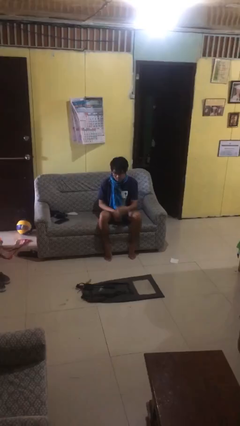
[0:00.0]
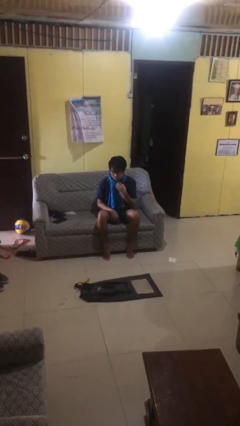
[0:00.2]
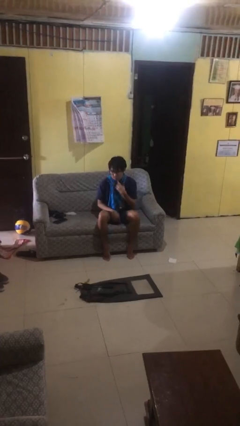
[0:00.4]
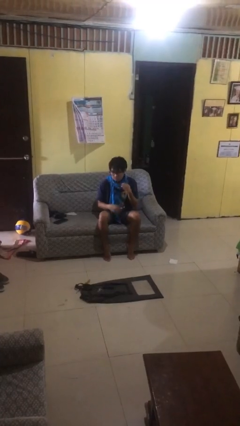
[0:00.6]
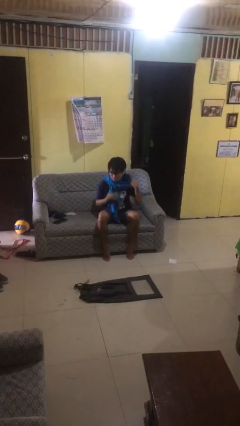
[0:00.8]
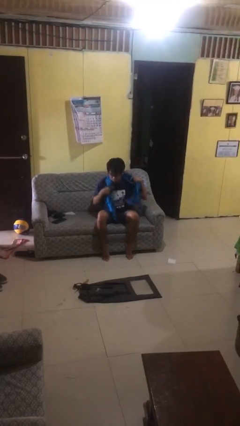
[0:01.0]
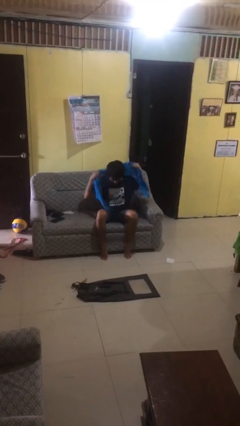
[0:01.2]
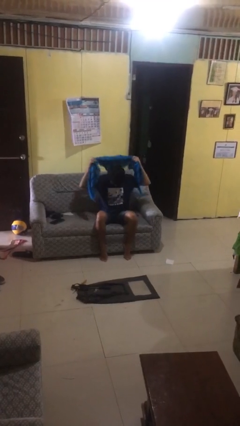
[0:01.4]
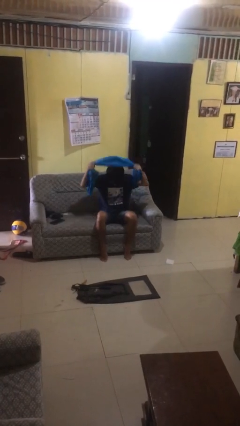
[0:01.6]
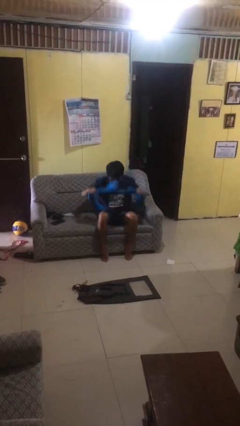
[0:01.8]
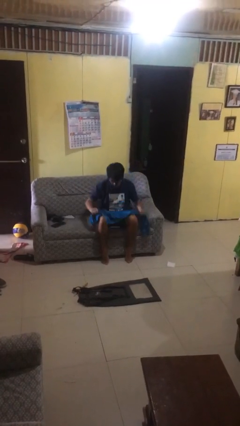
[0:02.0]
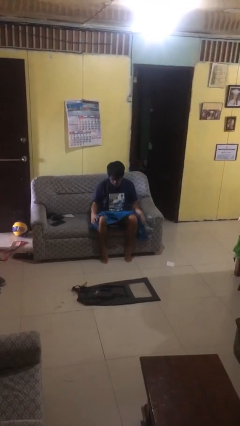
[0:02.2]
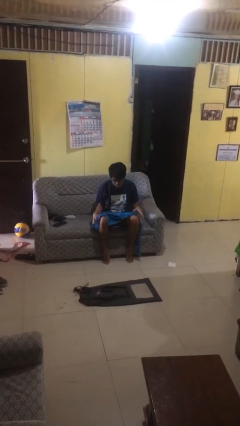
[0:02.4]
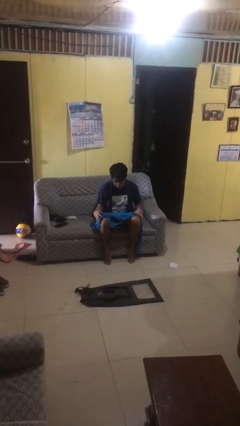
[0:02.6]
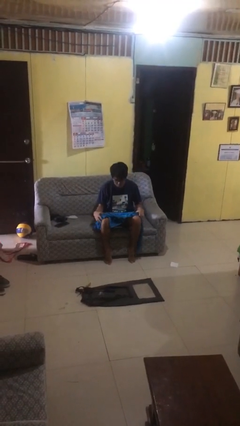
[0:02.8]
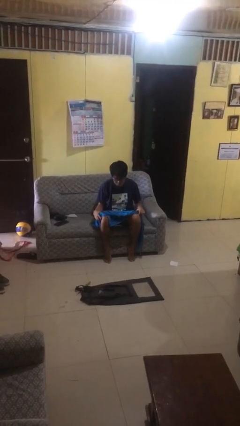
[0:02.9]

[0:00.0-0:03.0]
person takes off scarf

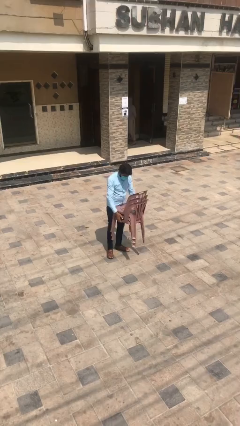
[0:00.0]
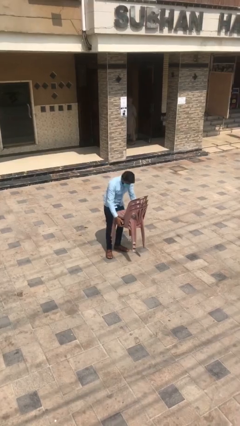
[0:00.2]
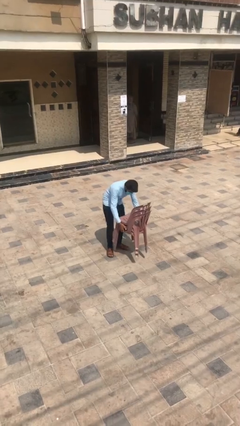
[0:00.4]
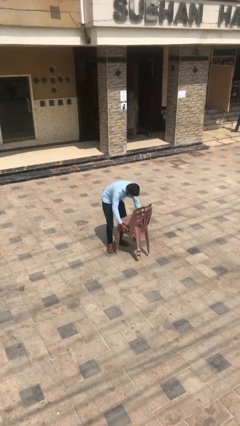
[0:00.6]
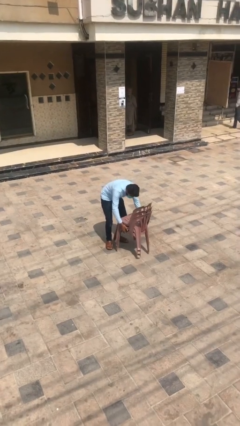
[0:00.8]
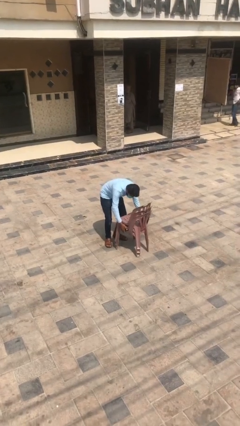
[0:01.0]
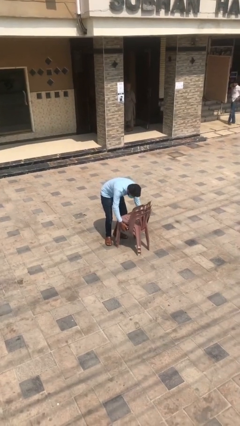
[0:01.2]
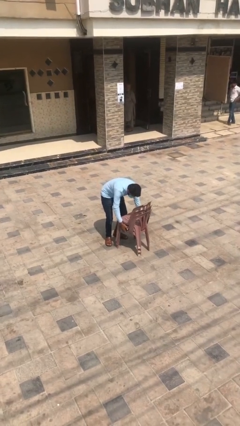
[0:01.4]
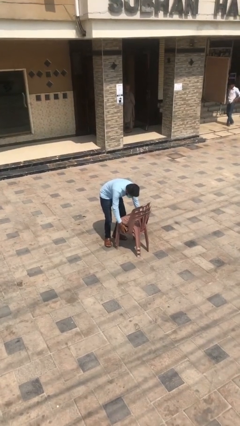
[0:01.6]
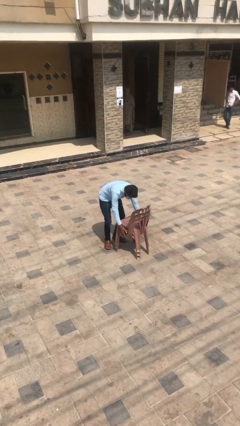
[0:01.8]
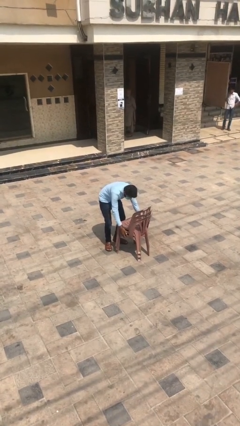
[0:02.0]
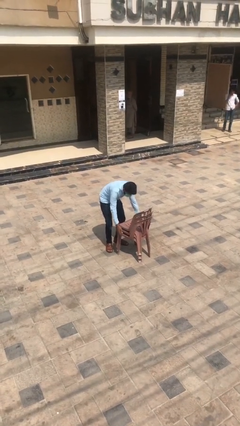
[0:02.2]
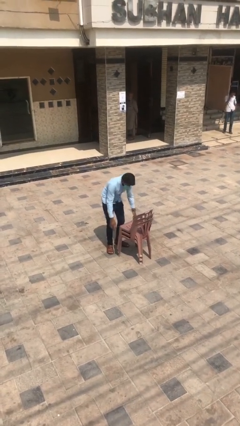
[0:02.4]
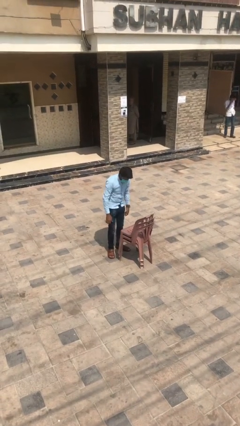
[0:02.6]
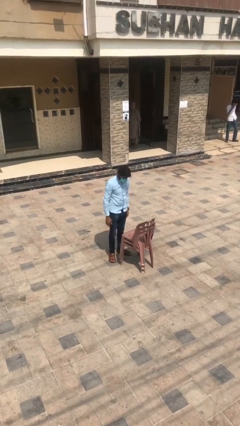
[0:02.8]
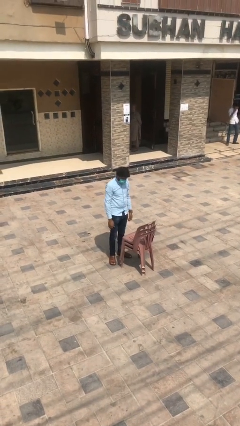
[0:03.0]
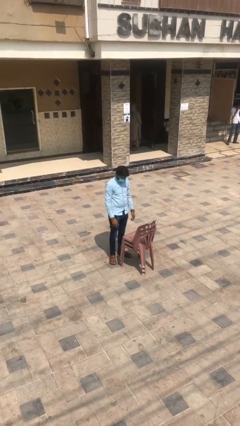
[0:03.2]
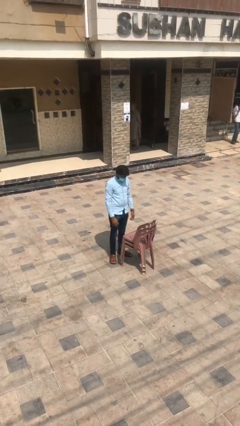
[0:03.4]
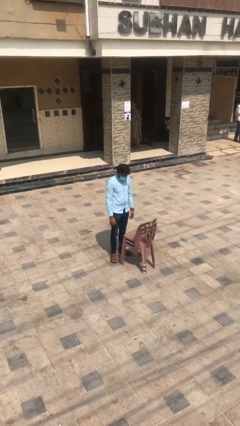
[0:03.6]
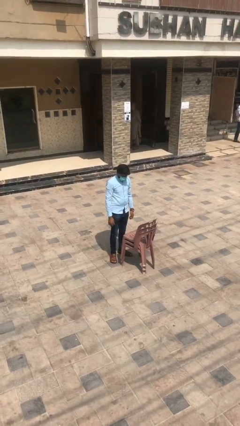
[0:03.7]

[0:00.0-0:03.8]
person puts down object on floor

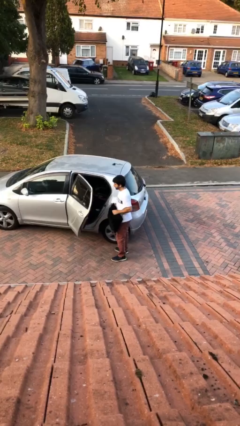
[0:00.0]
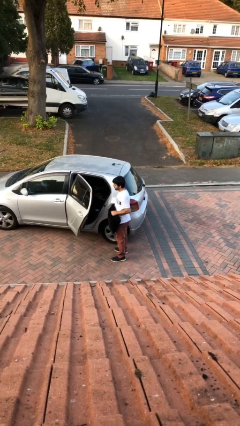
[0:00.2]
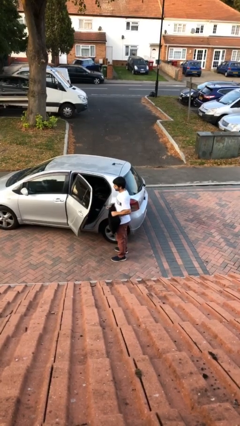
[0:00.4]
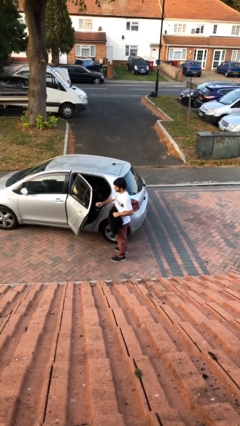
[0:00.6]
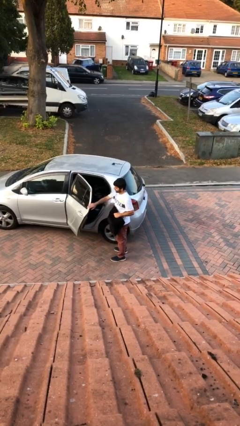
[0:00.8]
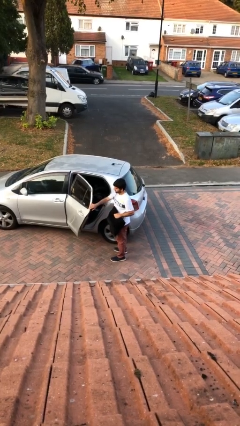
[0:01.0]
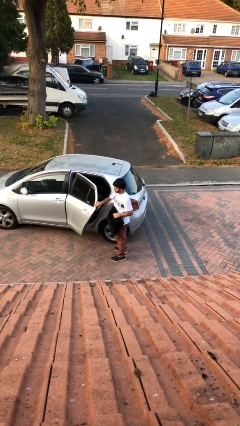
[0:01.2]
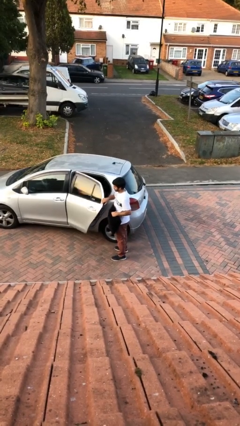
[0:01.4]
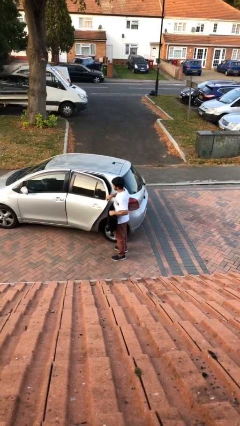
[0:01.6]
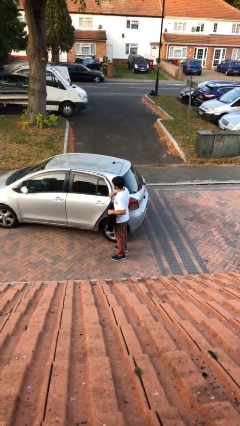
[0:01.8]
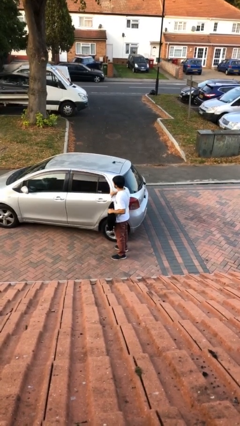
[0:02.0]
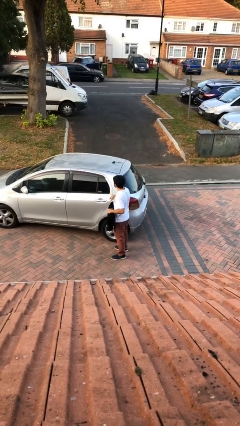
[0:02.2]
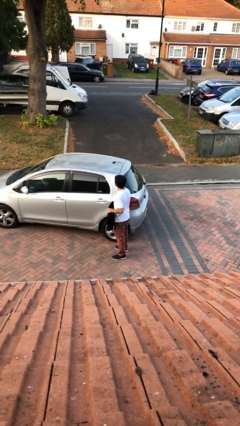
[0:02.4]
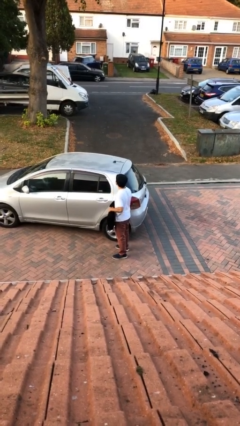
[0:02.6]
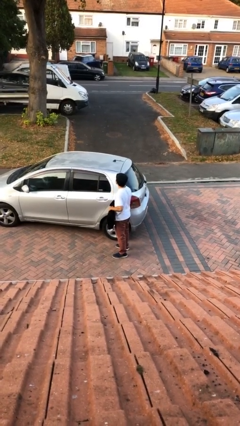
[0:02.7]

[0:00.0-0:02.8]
person closes car door

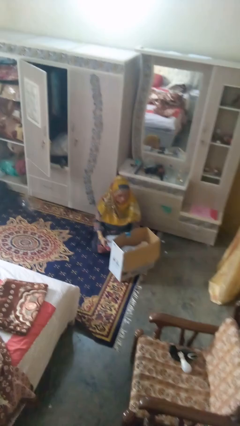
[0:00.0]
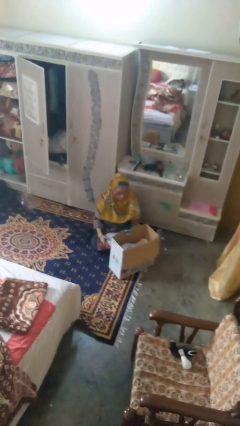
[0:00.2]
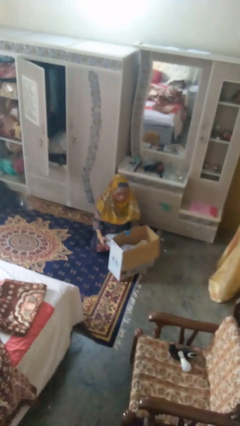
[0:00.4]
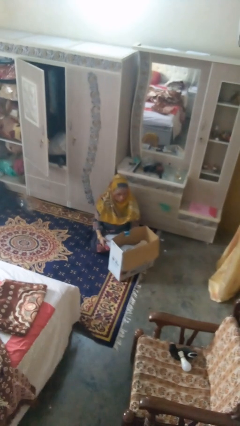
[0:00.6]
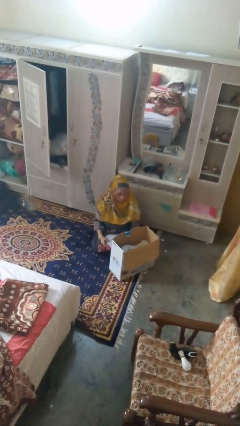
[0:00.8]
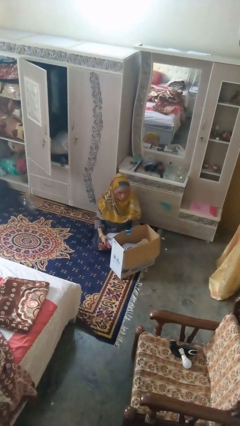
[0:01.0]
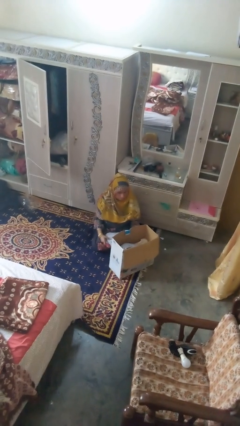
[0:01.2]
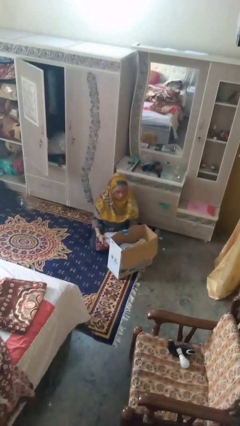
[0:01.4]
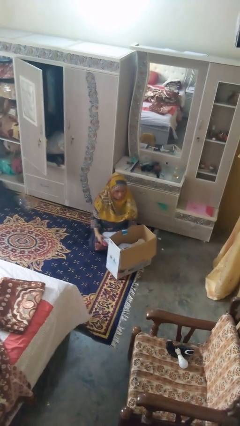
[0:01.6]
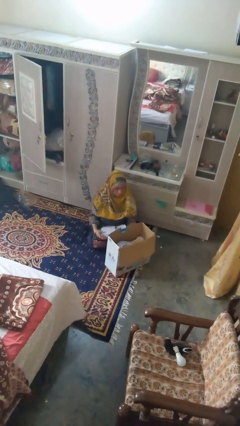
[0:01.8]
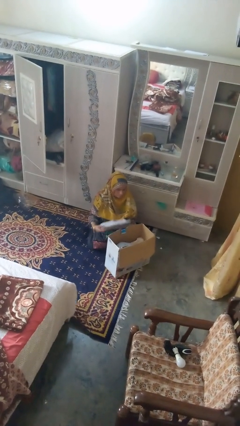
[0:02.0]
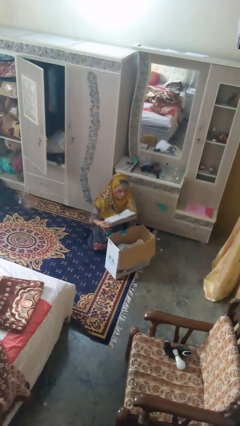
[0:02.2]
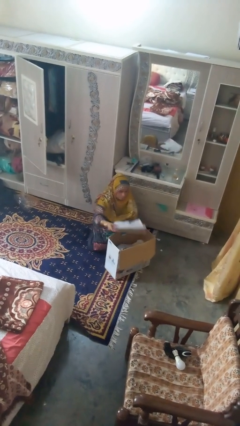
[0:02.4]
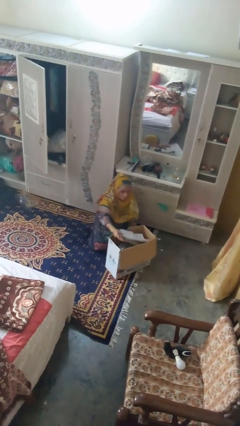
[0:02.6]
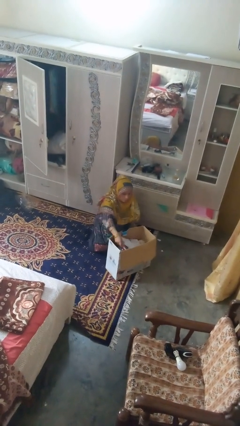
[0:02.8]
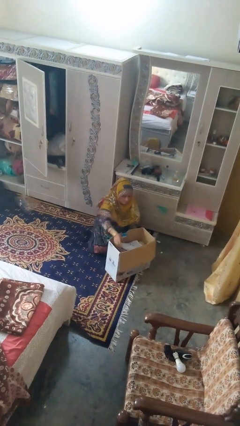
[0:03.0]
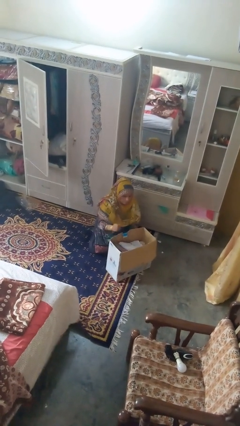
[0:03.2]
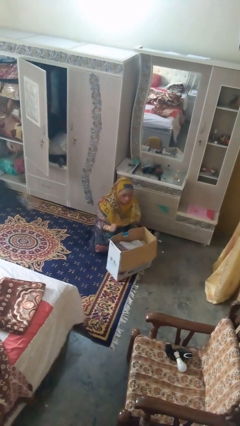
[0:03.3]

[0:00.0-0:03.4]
person puts object into box

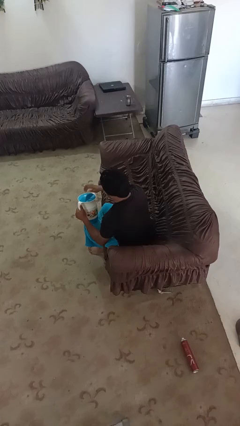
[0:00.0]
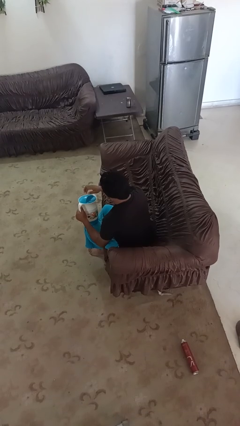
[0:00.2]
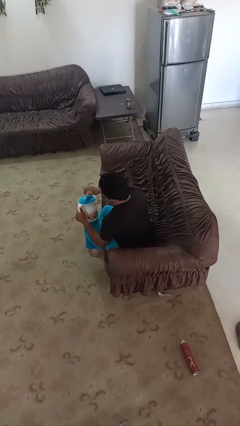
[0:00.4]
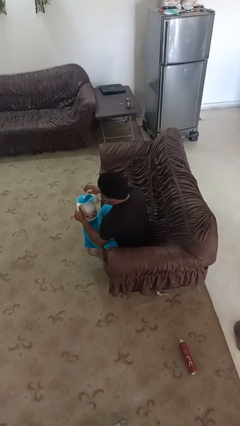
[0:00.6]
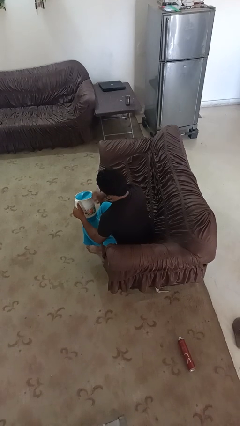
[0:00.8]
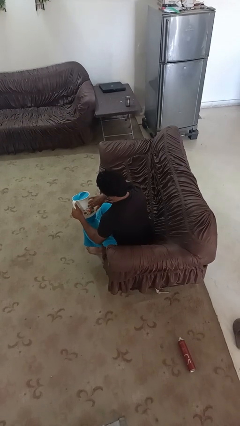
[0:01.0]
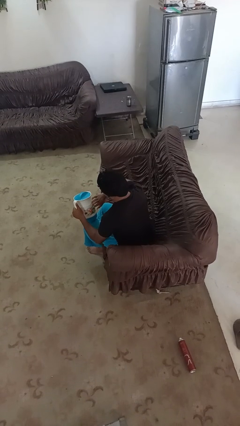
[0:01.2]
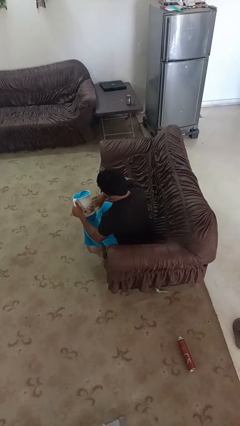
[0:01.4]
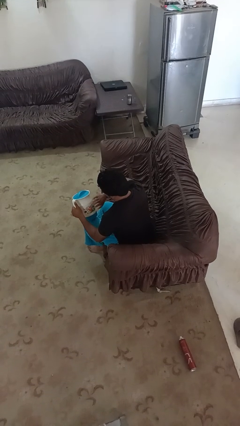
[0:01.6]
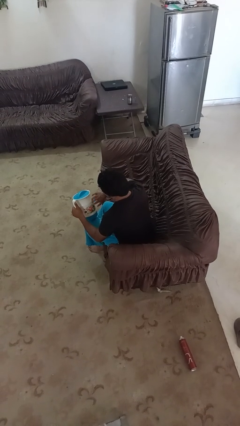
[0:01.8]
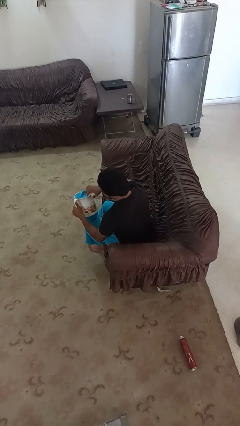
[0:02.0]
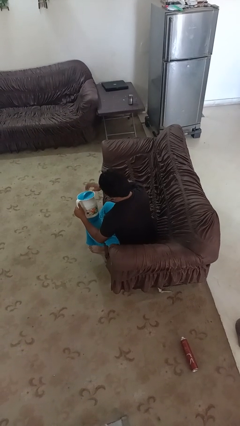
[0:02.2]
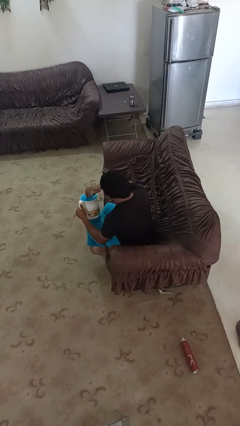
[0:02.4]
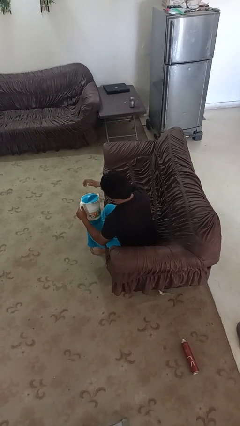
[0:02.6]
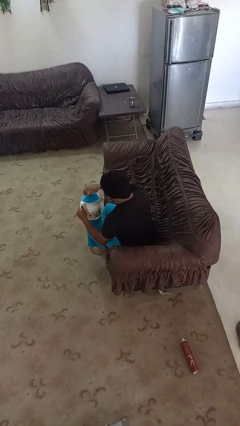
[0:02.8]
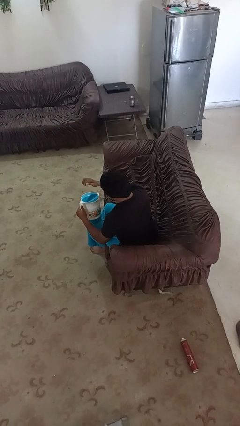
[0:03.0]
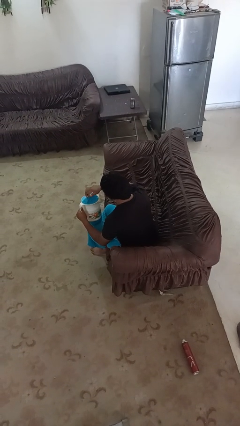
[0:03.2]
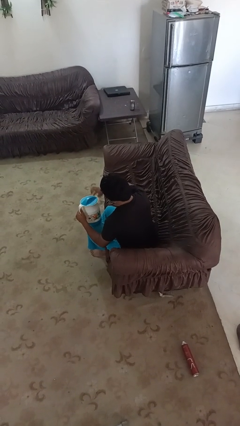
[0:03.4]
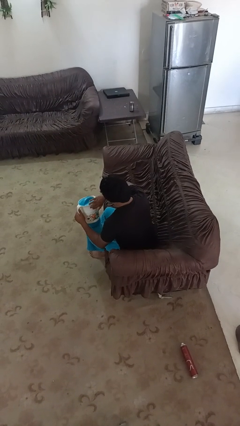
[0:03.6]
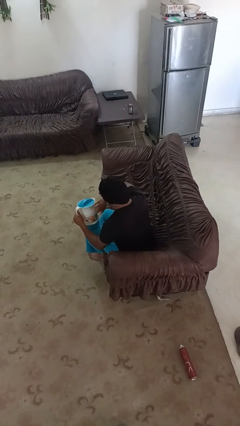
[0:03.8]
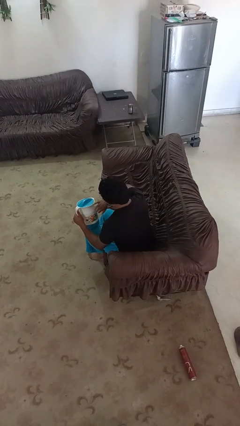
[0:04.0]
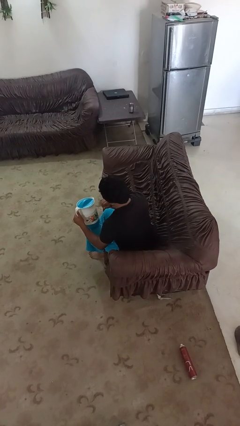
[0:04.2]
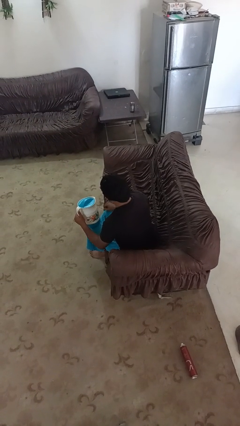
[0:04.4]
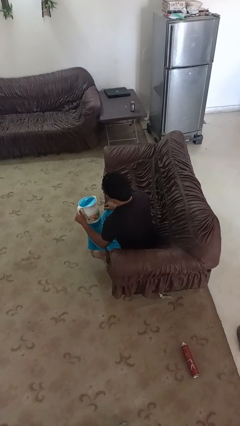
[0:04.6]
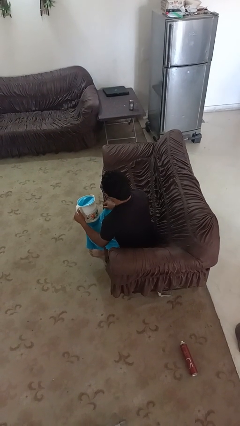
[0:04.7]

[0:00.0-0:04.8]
person taps object with finger
